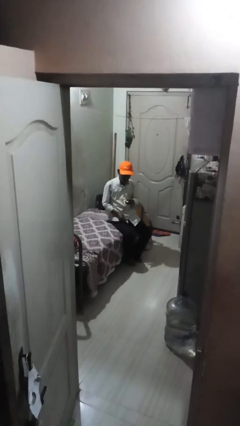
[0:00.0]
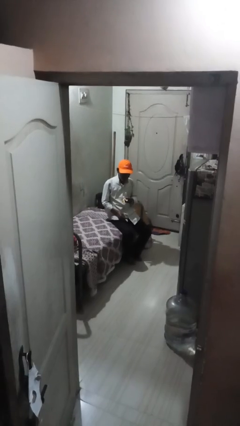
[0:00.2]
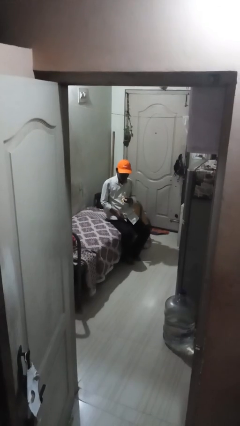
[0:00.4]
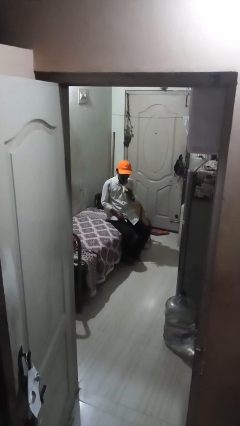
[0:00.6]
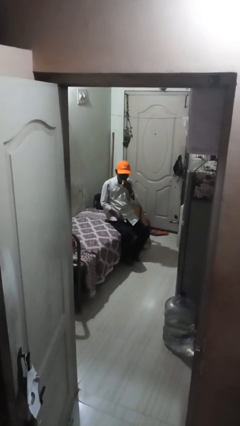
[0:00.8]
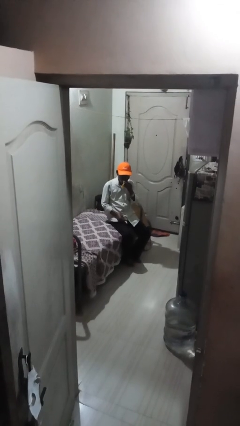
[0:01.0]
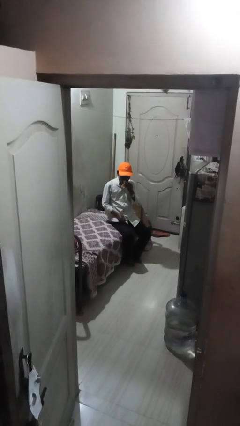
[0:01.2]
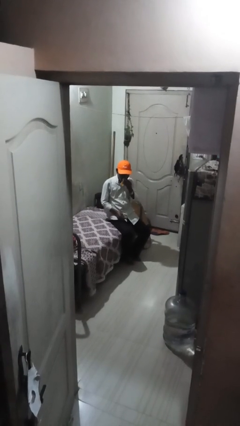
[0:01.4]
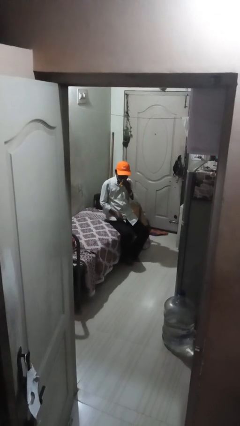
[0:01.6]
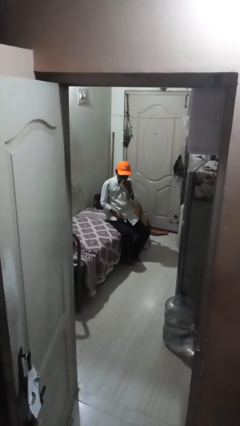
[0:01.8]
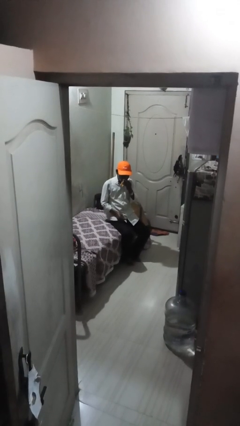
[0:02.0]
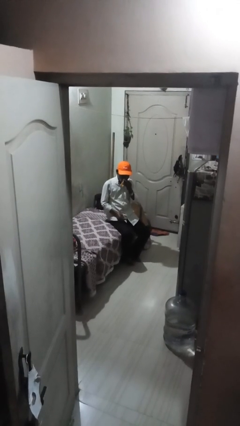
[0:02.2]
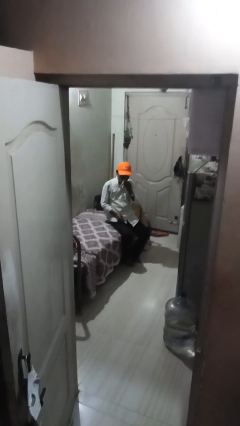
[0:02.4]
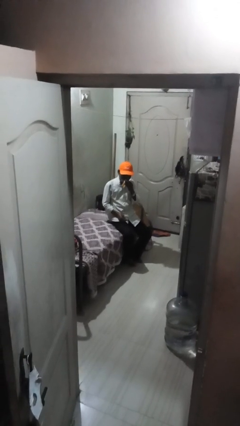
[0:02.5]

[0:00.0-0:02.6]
person eats banana

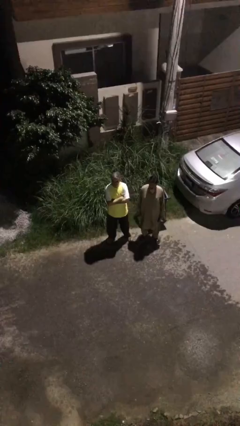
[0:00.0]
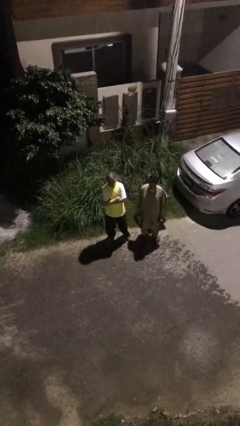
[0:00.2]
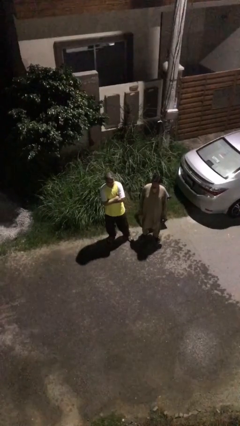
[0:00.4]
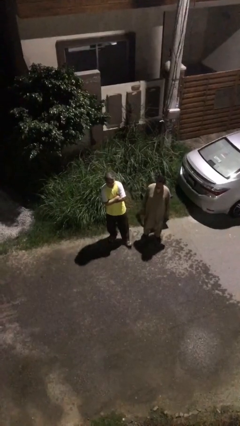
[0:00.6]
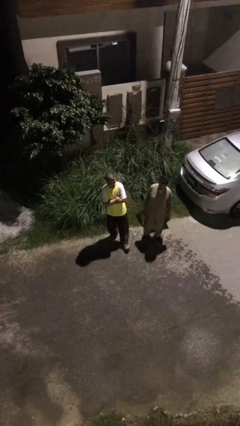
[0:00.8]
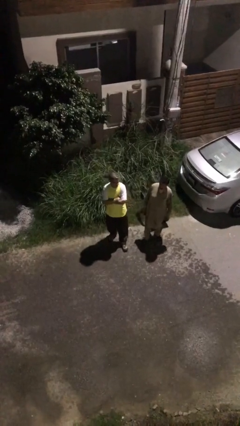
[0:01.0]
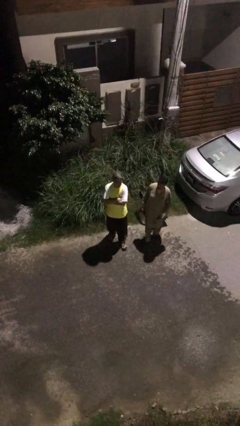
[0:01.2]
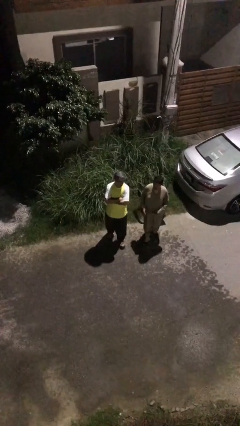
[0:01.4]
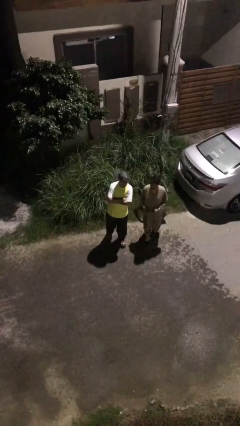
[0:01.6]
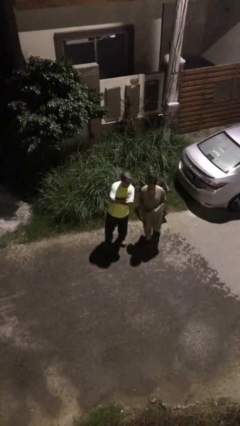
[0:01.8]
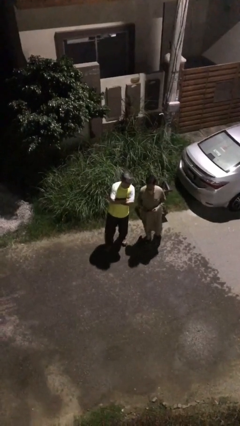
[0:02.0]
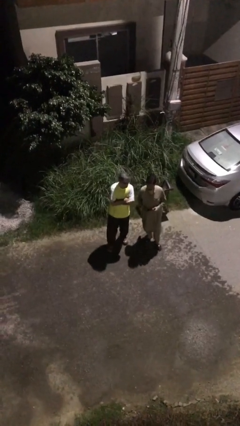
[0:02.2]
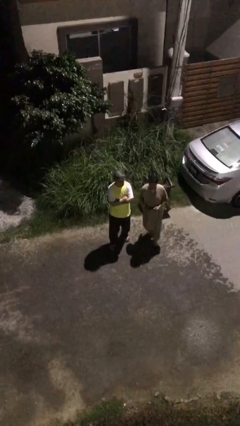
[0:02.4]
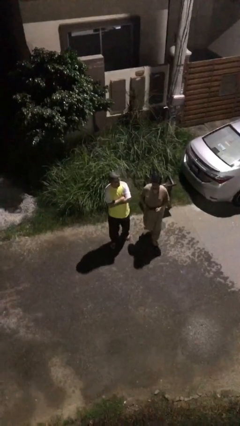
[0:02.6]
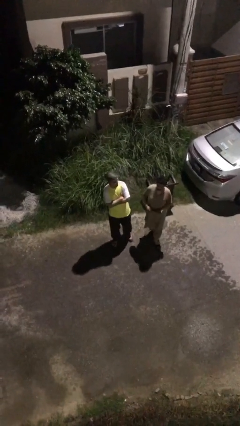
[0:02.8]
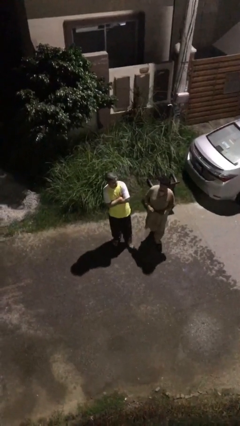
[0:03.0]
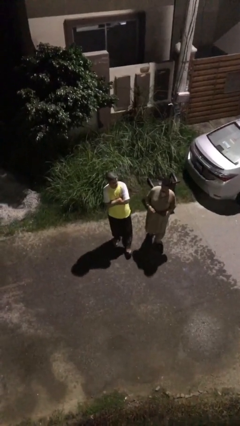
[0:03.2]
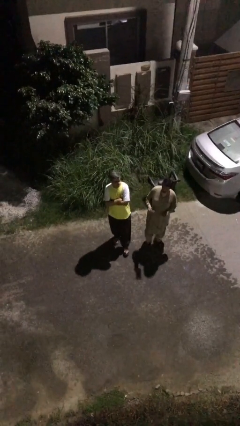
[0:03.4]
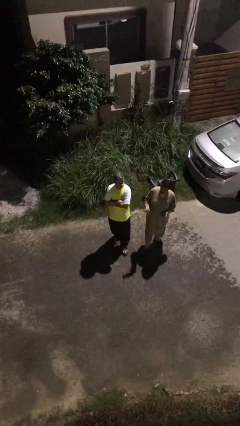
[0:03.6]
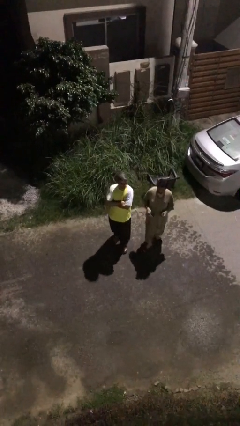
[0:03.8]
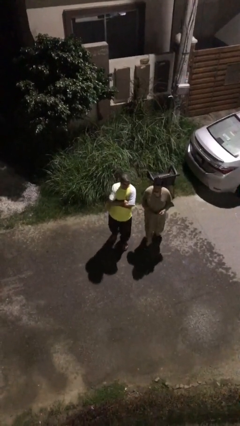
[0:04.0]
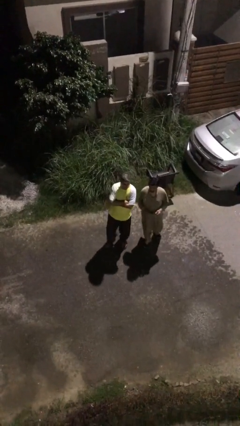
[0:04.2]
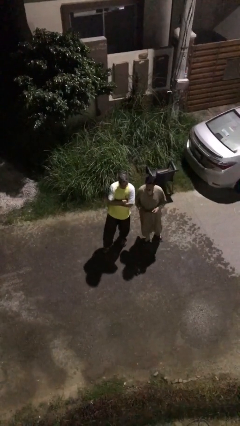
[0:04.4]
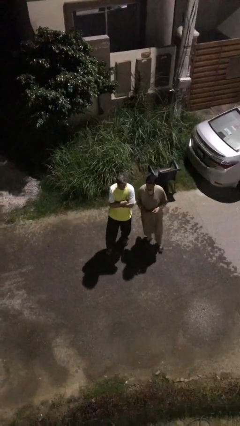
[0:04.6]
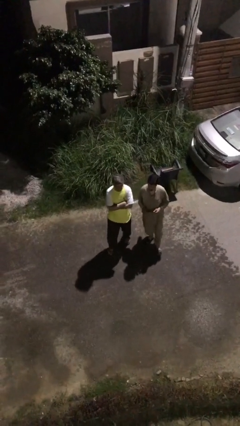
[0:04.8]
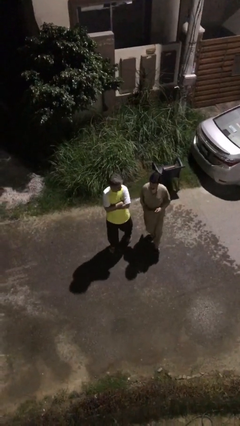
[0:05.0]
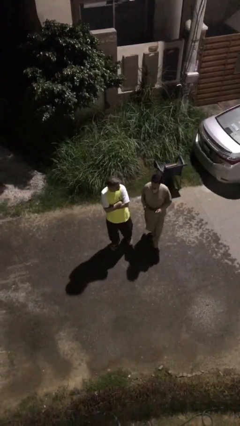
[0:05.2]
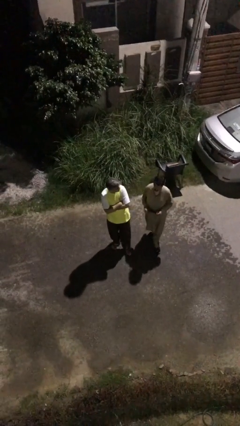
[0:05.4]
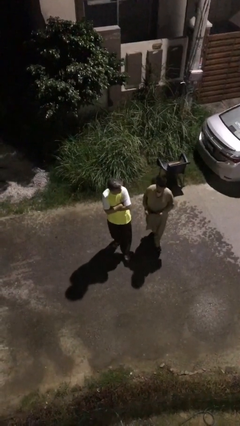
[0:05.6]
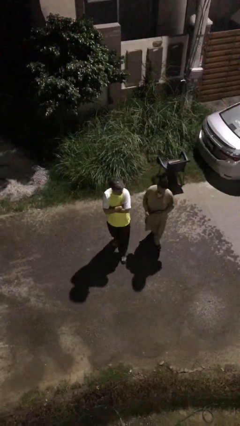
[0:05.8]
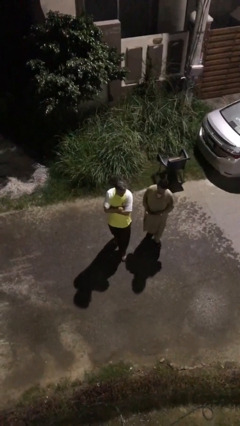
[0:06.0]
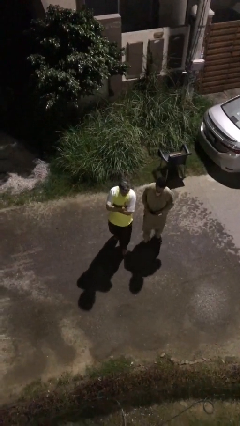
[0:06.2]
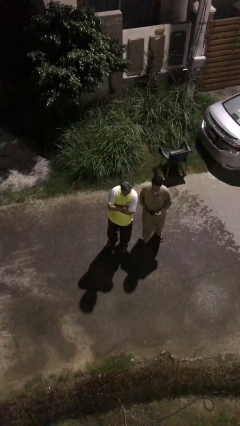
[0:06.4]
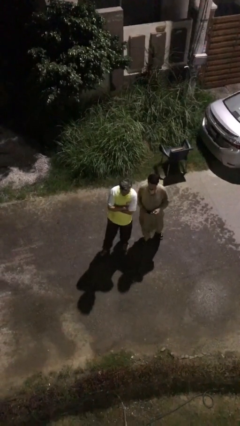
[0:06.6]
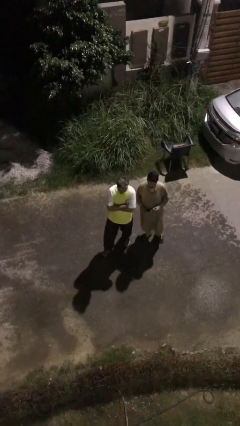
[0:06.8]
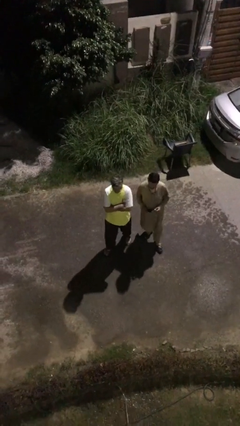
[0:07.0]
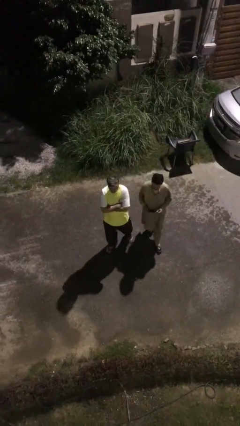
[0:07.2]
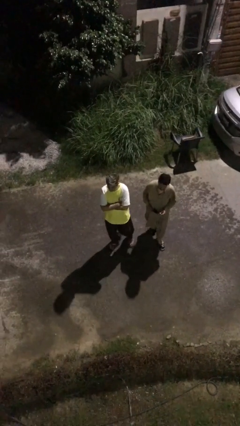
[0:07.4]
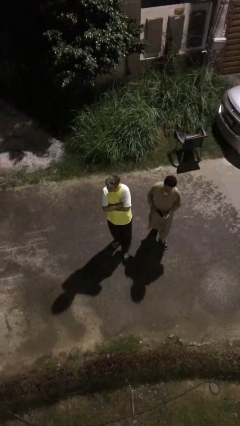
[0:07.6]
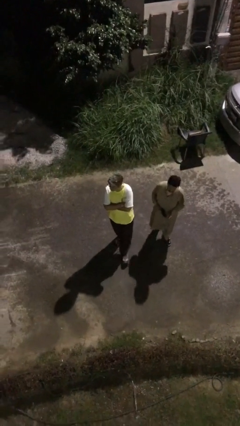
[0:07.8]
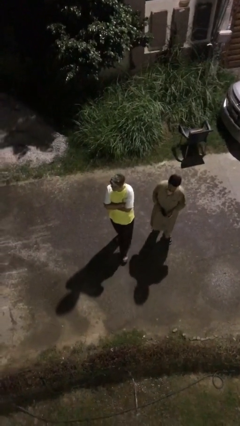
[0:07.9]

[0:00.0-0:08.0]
person talks to person

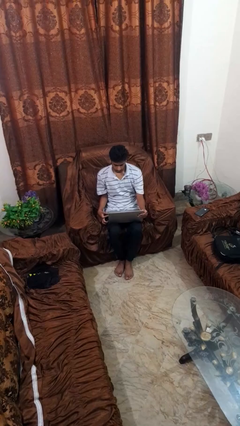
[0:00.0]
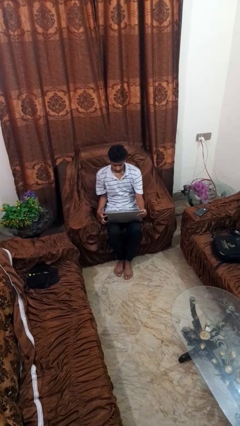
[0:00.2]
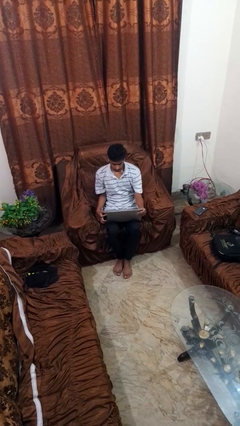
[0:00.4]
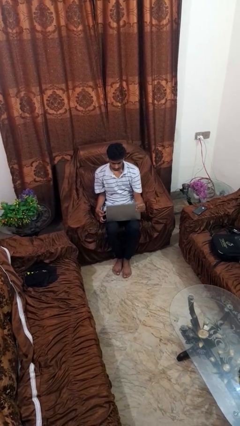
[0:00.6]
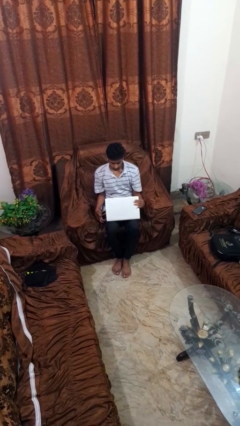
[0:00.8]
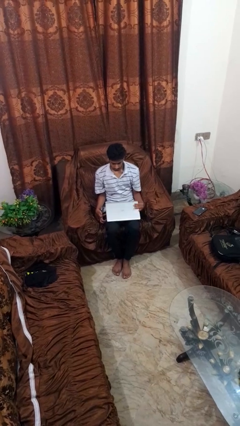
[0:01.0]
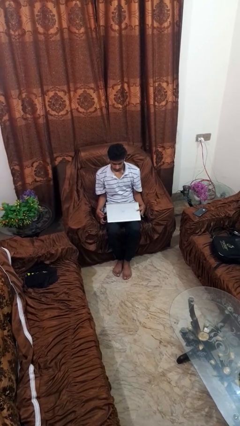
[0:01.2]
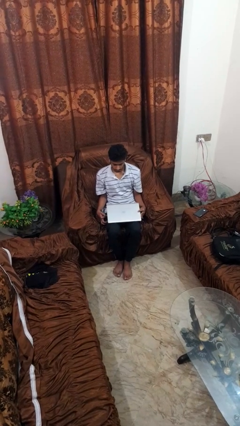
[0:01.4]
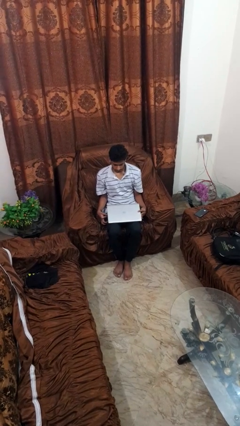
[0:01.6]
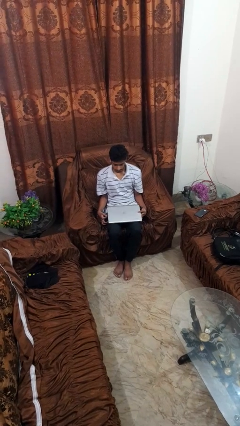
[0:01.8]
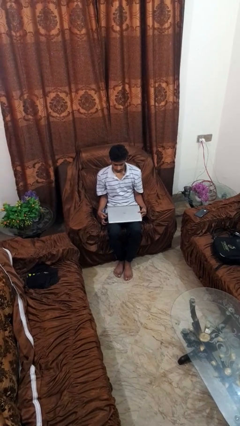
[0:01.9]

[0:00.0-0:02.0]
person closes laptop

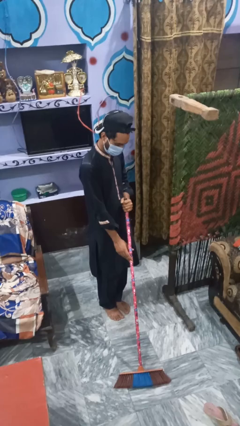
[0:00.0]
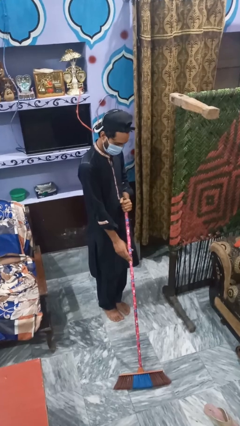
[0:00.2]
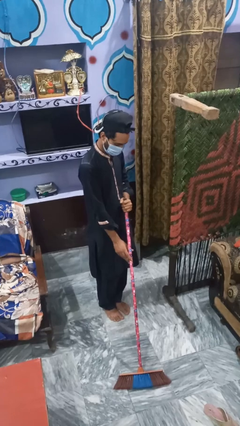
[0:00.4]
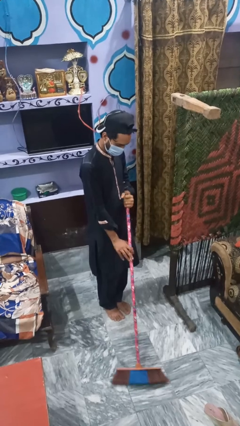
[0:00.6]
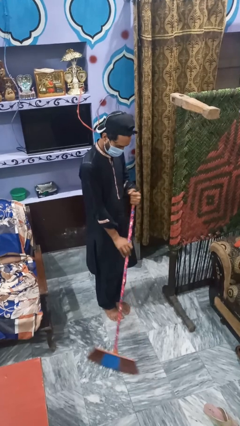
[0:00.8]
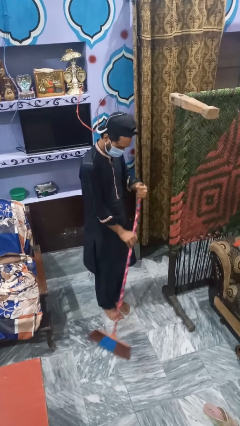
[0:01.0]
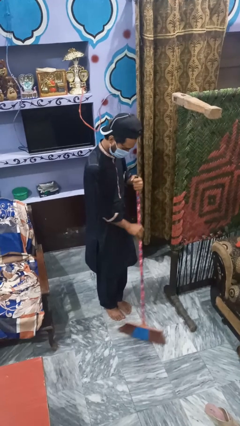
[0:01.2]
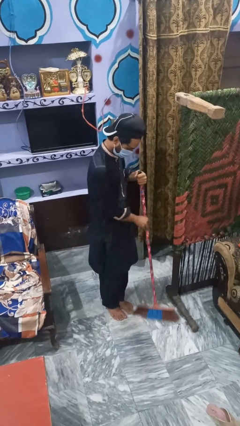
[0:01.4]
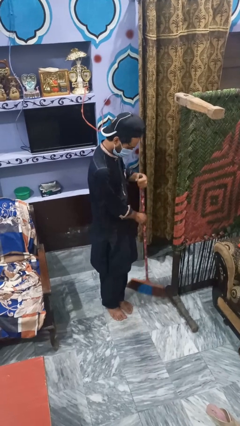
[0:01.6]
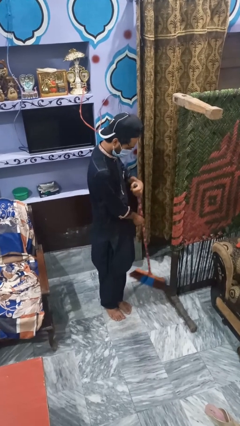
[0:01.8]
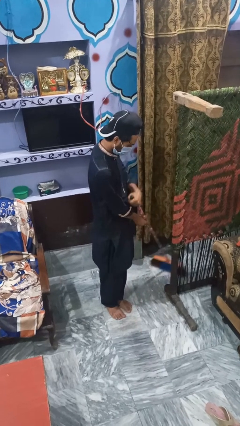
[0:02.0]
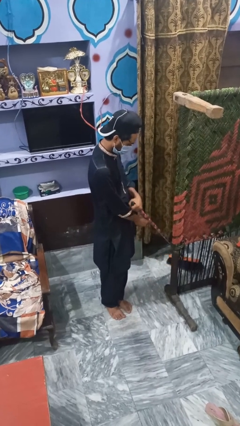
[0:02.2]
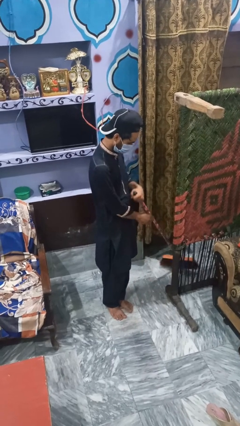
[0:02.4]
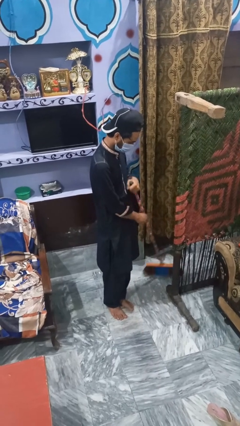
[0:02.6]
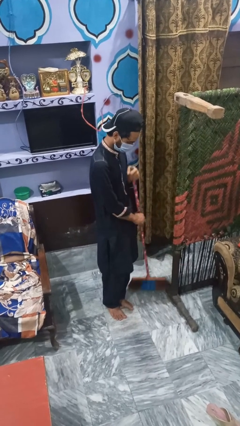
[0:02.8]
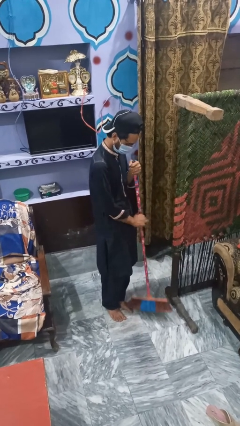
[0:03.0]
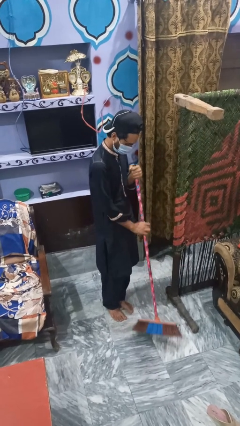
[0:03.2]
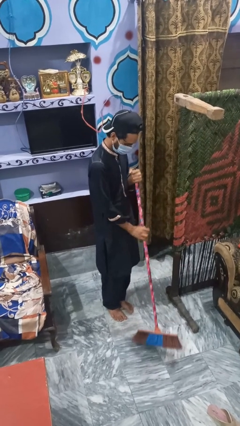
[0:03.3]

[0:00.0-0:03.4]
person mops

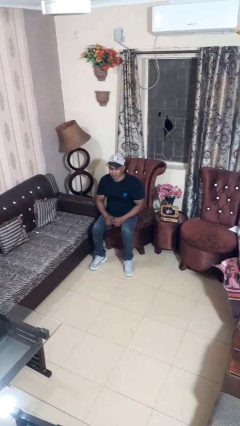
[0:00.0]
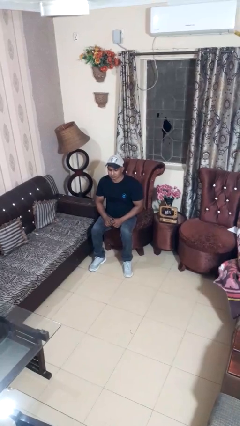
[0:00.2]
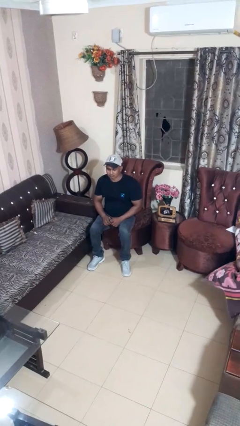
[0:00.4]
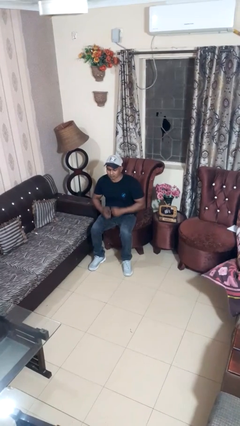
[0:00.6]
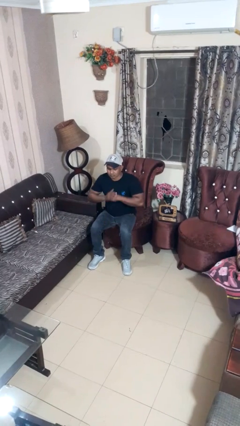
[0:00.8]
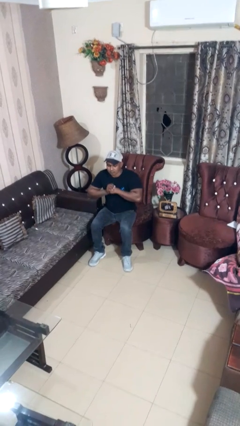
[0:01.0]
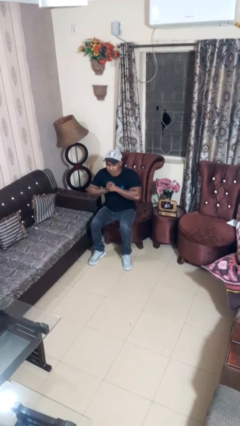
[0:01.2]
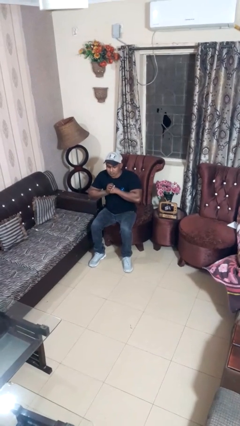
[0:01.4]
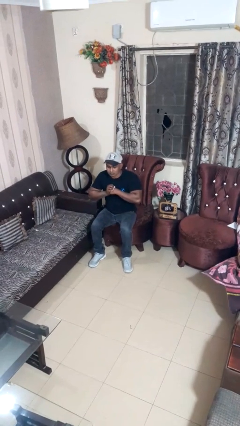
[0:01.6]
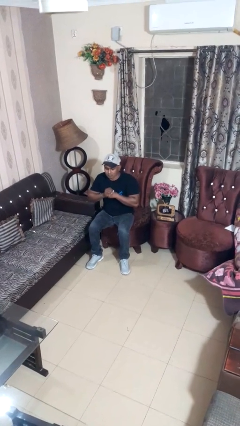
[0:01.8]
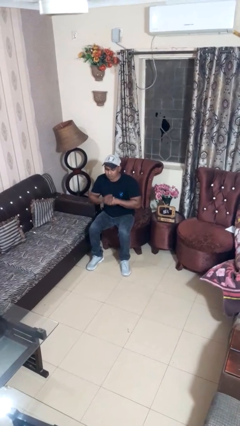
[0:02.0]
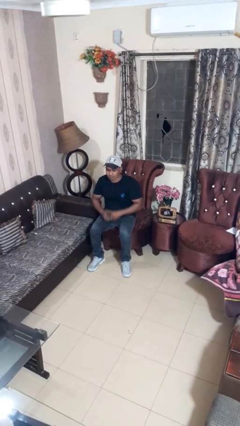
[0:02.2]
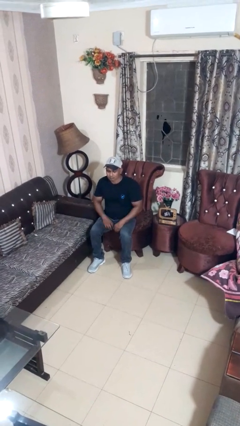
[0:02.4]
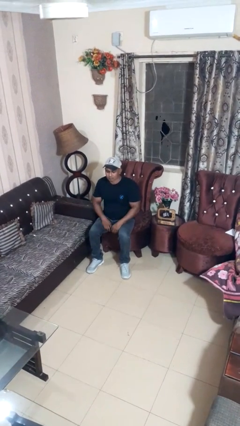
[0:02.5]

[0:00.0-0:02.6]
person cracks knuckles
